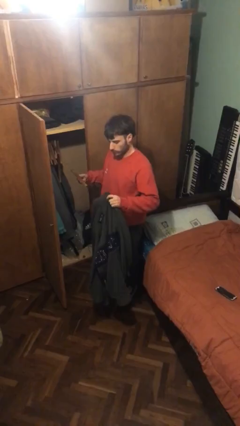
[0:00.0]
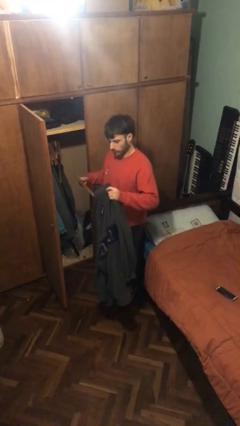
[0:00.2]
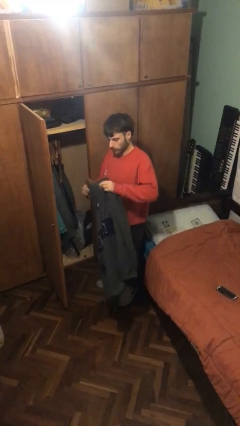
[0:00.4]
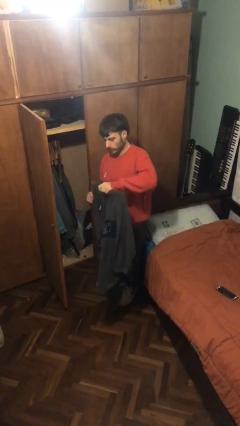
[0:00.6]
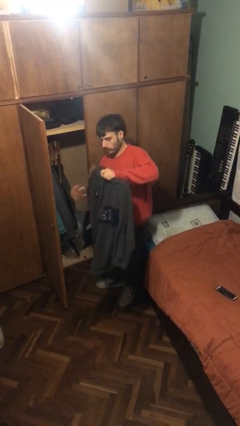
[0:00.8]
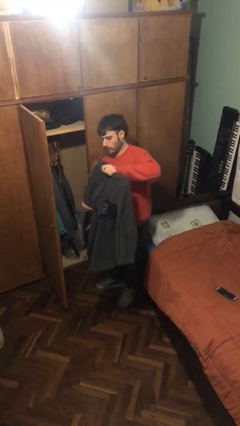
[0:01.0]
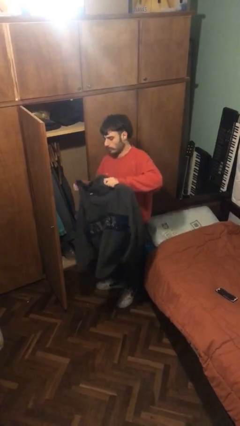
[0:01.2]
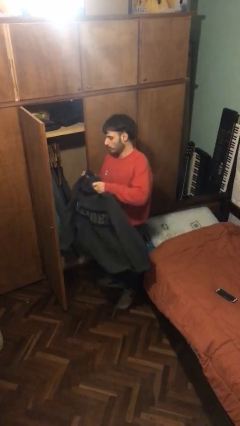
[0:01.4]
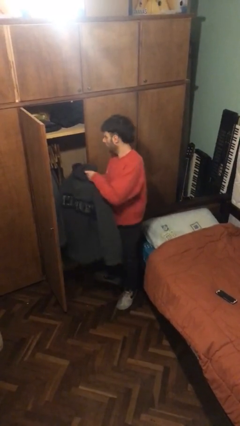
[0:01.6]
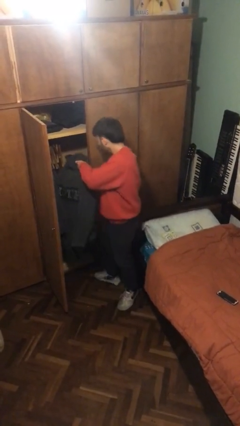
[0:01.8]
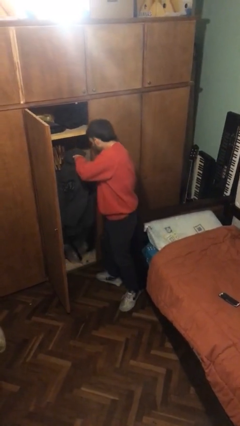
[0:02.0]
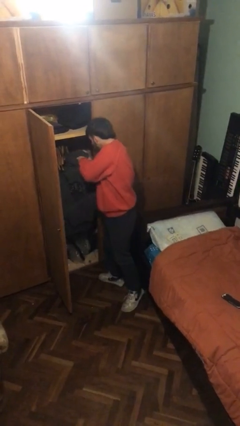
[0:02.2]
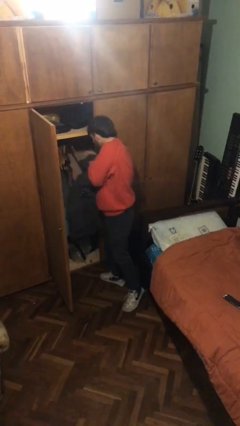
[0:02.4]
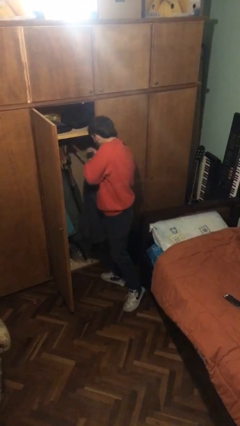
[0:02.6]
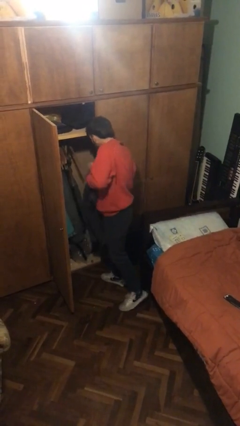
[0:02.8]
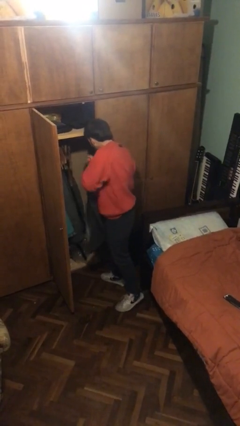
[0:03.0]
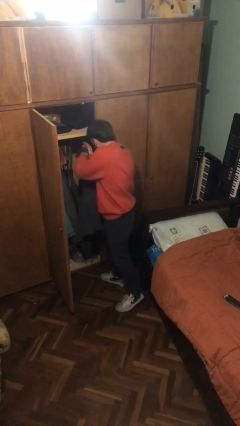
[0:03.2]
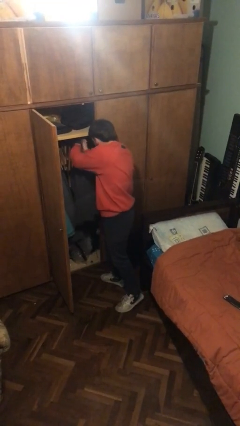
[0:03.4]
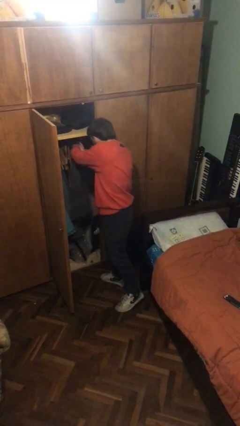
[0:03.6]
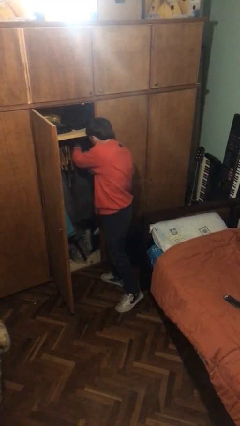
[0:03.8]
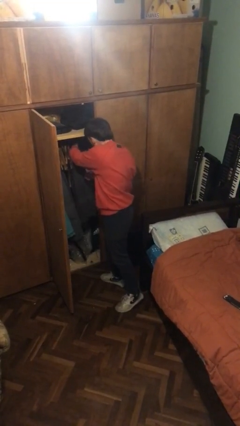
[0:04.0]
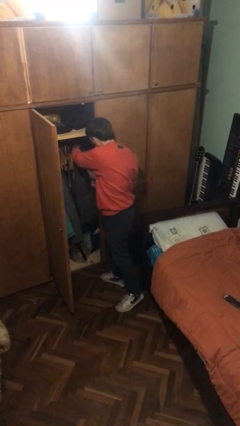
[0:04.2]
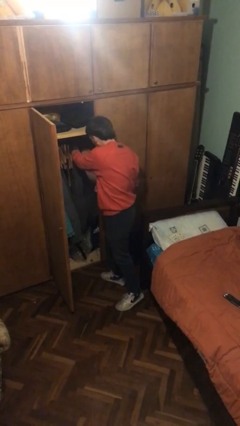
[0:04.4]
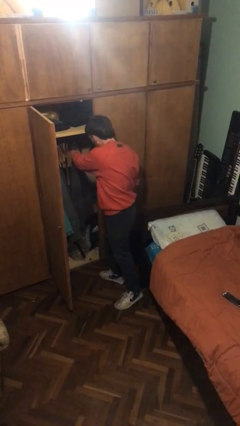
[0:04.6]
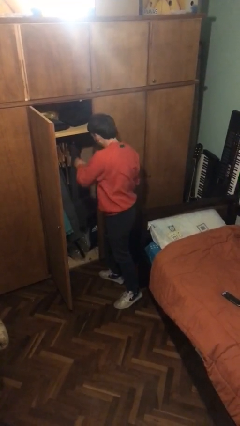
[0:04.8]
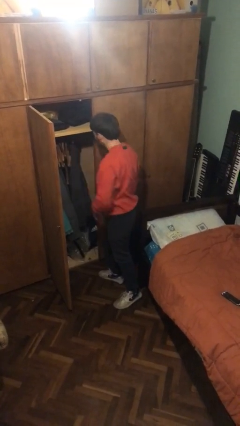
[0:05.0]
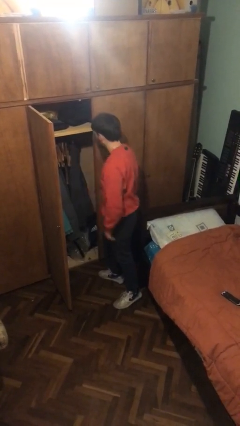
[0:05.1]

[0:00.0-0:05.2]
person puts clothes into closet

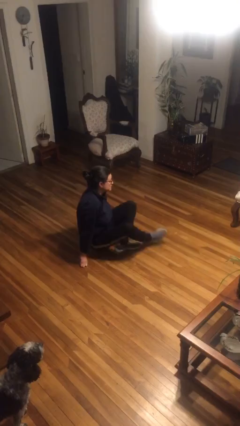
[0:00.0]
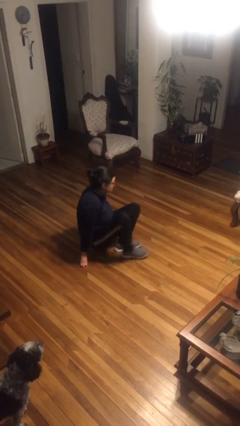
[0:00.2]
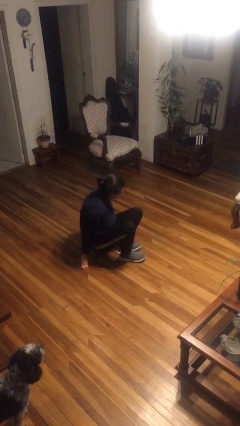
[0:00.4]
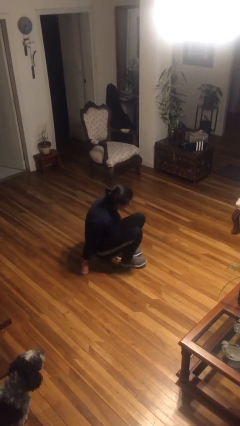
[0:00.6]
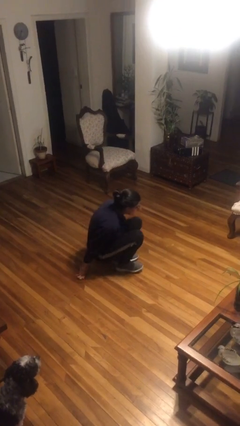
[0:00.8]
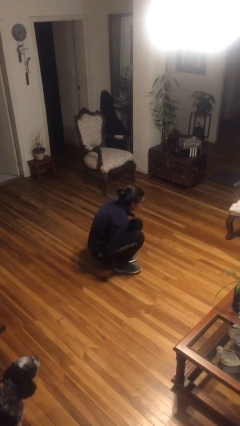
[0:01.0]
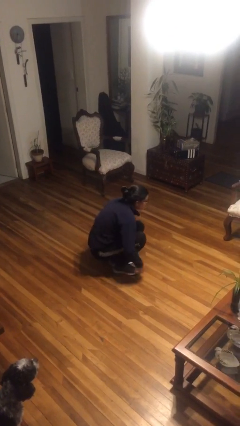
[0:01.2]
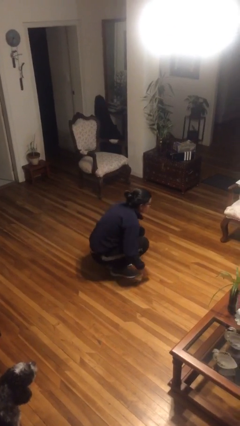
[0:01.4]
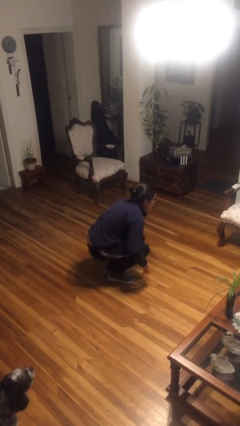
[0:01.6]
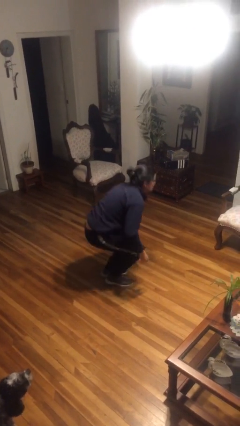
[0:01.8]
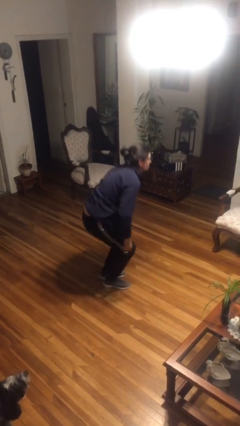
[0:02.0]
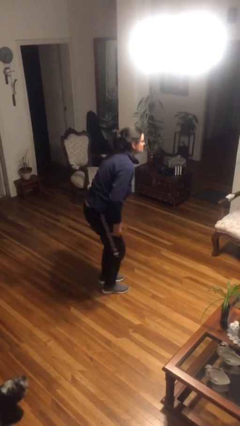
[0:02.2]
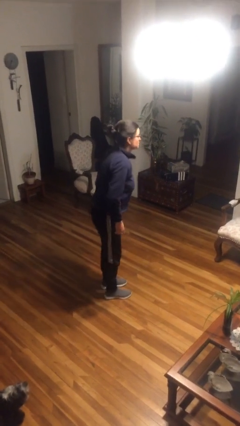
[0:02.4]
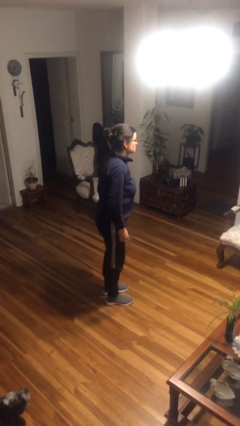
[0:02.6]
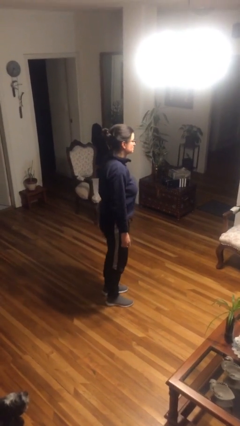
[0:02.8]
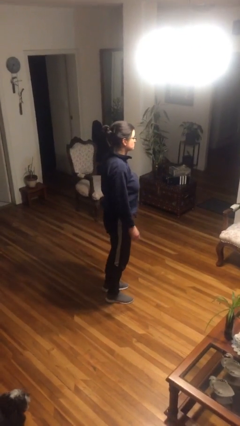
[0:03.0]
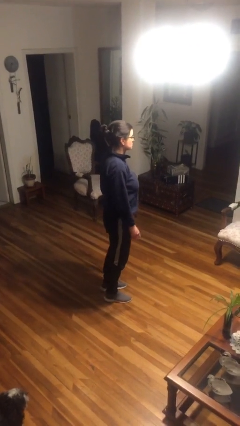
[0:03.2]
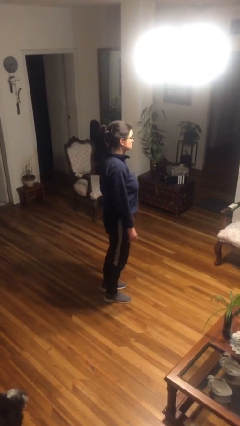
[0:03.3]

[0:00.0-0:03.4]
person stands up from floor

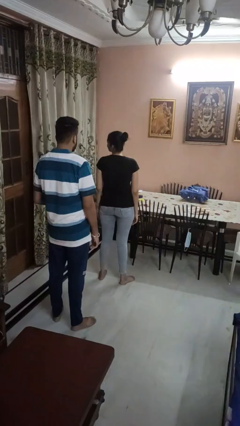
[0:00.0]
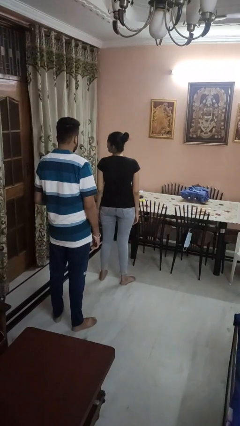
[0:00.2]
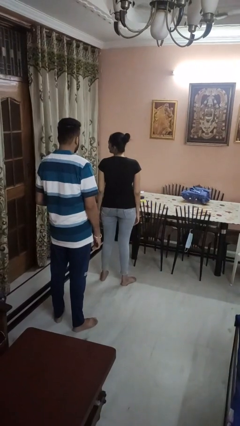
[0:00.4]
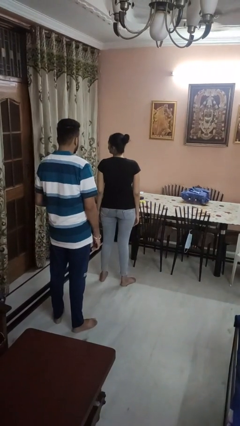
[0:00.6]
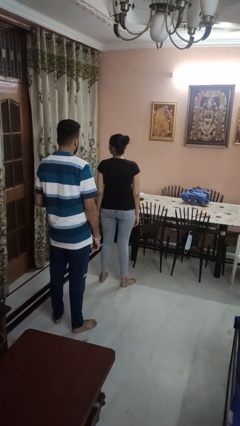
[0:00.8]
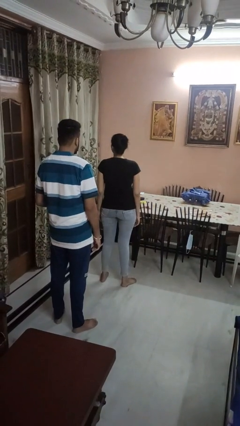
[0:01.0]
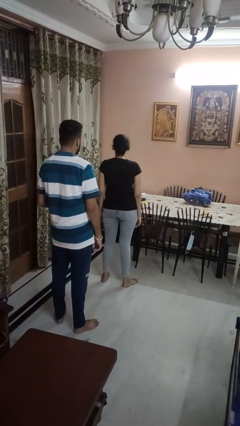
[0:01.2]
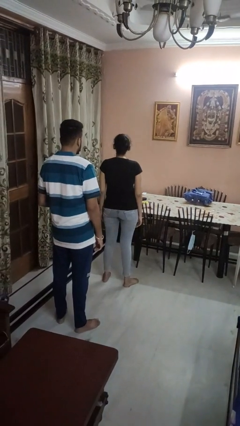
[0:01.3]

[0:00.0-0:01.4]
person looks over shoulder

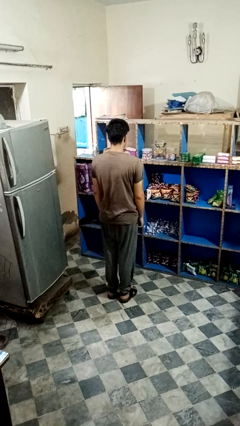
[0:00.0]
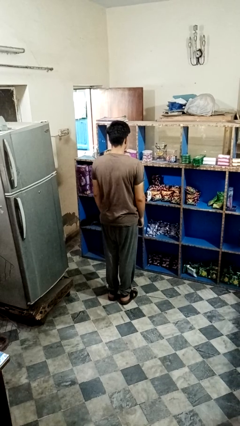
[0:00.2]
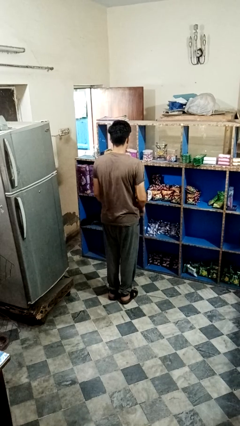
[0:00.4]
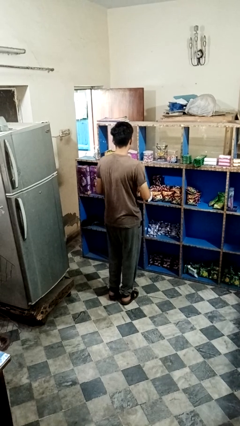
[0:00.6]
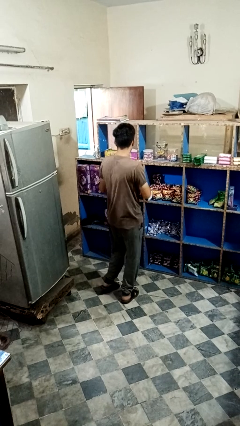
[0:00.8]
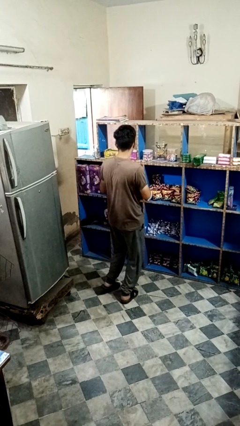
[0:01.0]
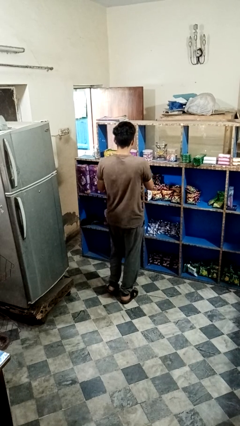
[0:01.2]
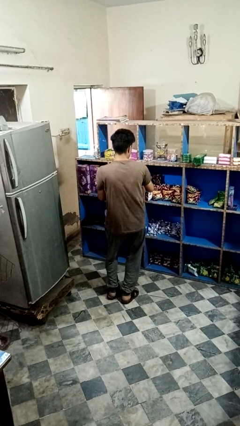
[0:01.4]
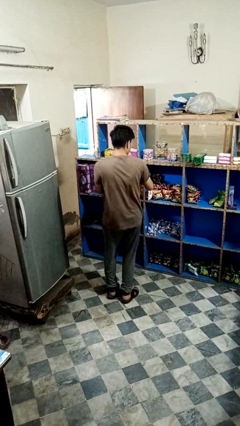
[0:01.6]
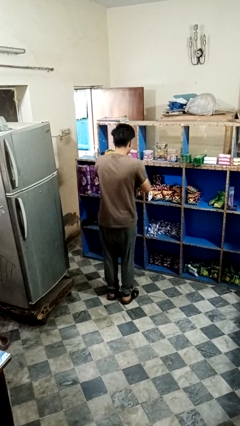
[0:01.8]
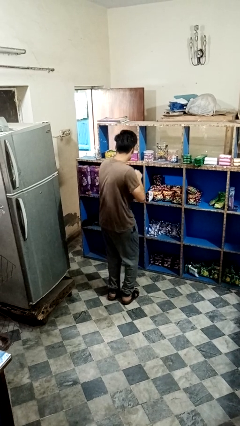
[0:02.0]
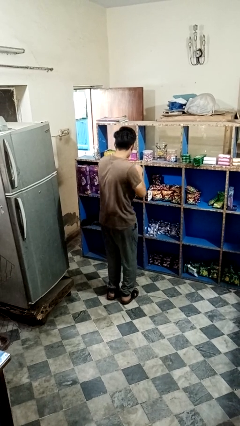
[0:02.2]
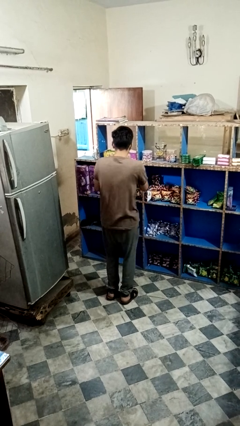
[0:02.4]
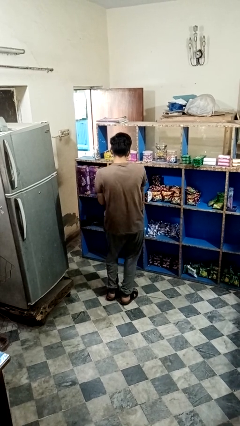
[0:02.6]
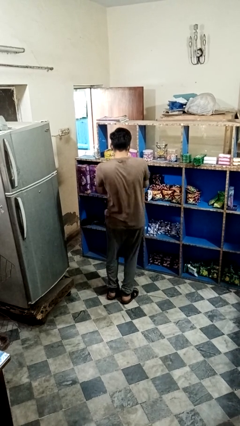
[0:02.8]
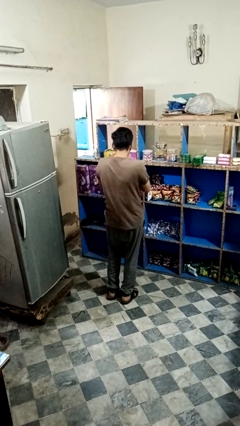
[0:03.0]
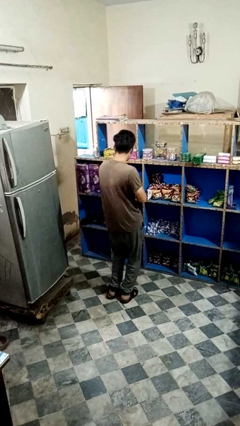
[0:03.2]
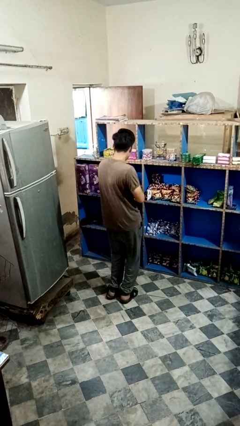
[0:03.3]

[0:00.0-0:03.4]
person dances in place

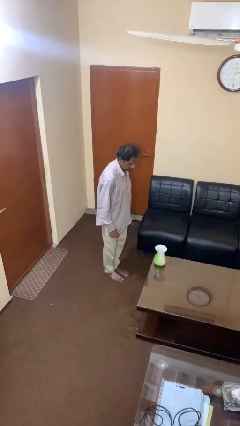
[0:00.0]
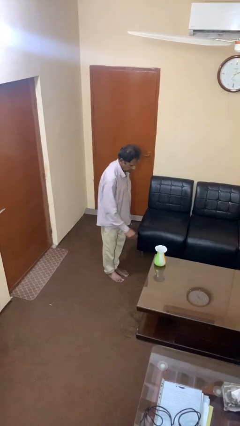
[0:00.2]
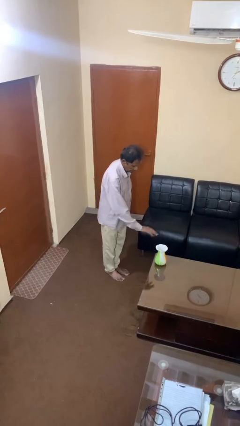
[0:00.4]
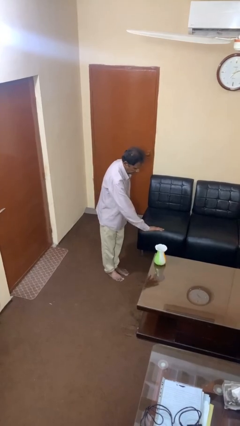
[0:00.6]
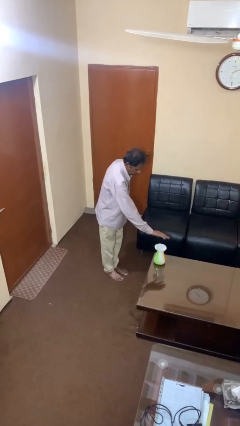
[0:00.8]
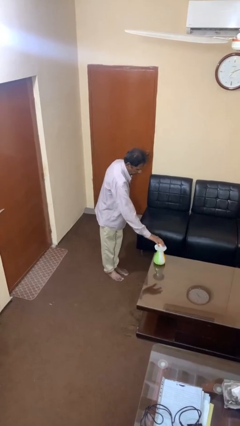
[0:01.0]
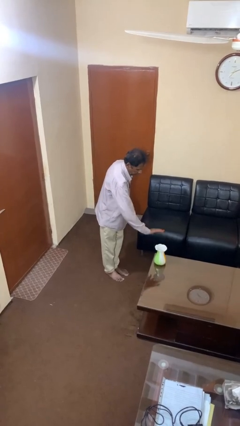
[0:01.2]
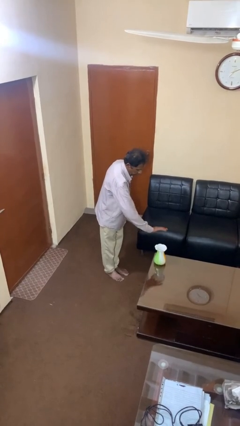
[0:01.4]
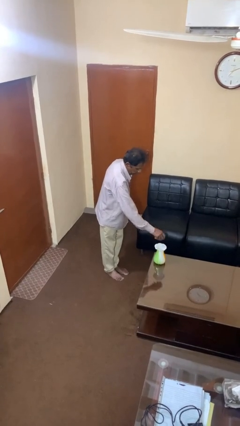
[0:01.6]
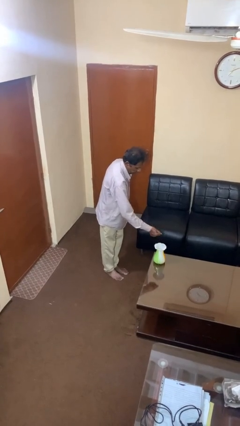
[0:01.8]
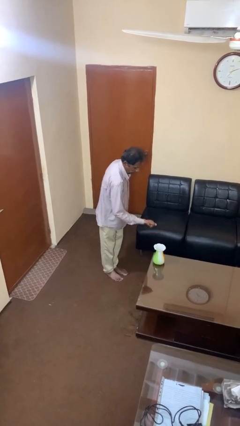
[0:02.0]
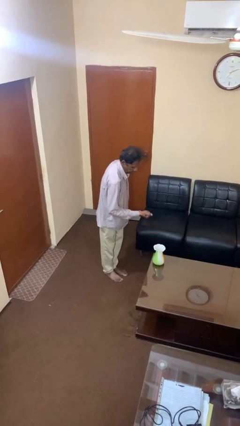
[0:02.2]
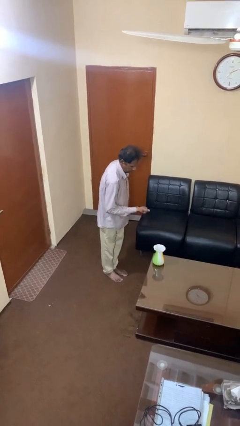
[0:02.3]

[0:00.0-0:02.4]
person waves hand over object

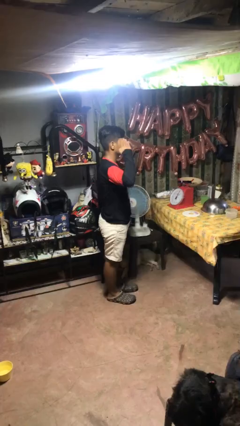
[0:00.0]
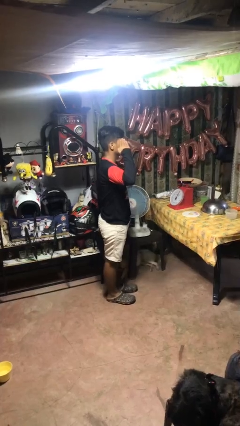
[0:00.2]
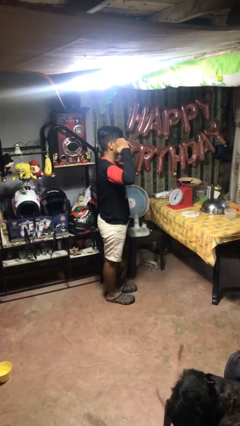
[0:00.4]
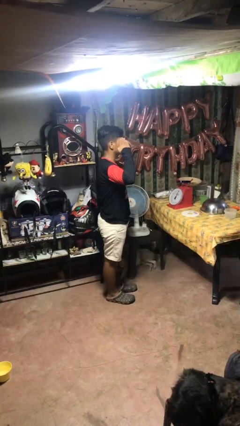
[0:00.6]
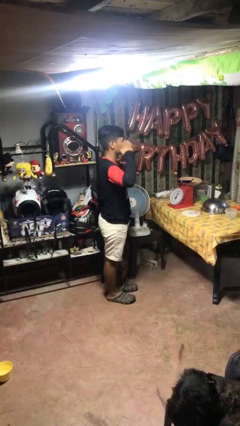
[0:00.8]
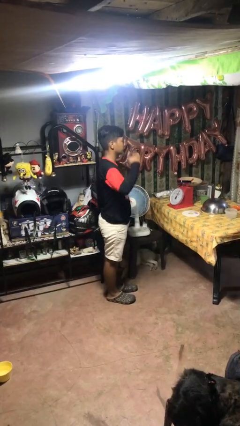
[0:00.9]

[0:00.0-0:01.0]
person salutes

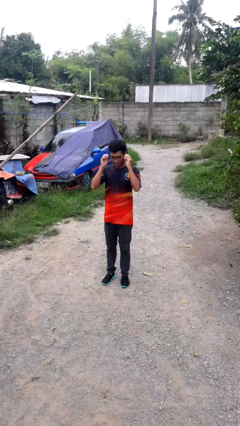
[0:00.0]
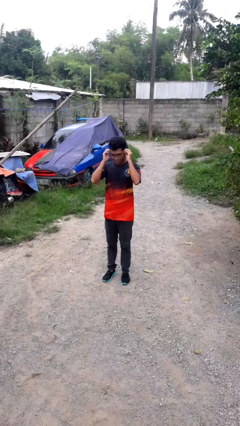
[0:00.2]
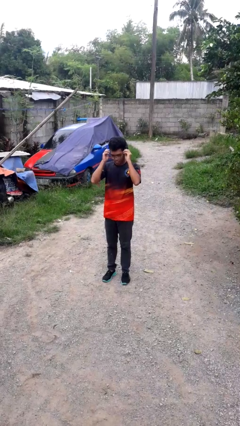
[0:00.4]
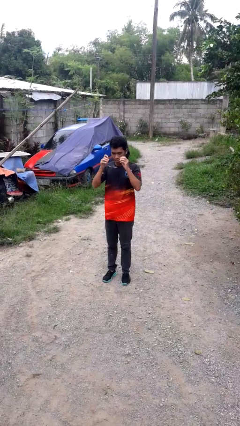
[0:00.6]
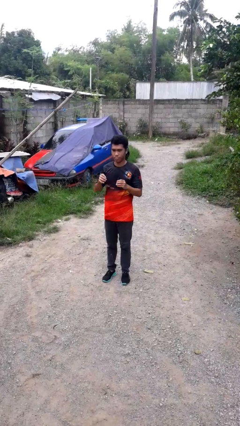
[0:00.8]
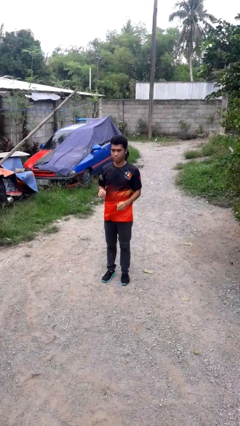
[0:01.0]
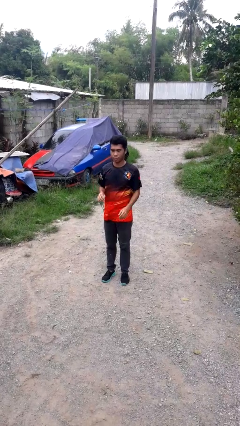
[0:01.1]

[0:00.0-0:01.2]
person takes off glasses
